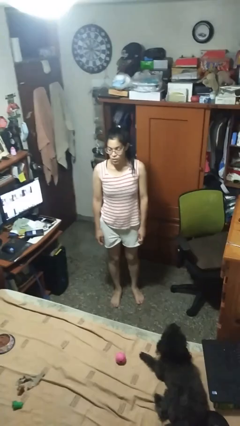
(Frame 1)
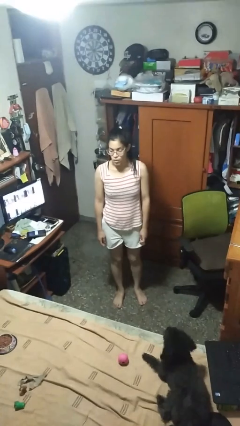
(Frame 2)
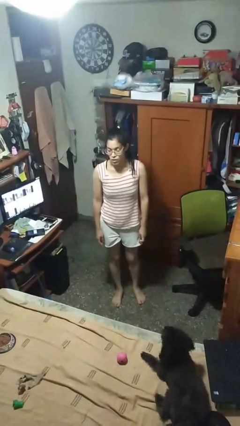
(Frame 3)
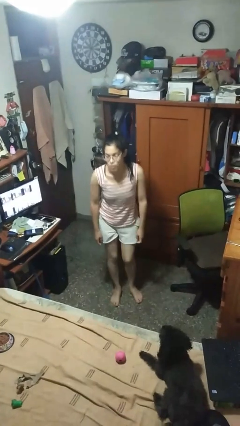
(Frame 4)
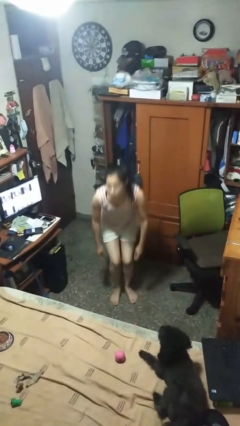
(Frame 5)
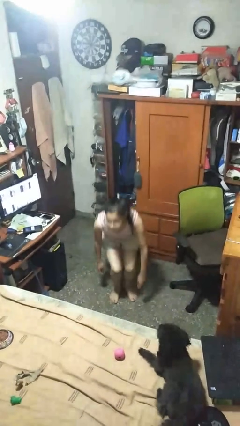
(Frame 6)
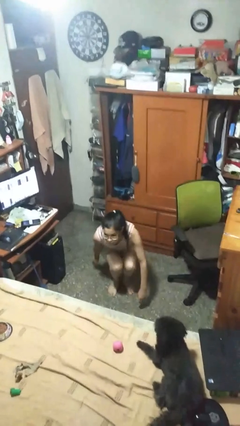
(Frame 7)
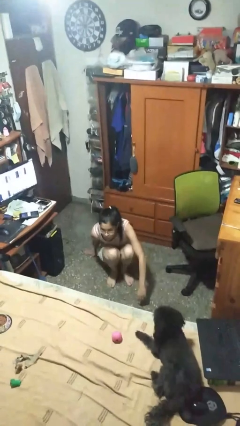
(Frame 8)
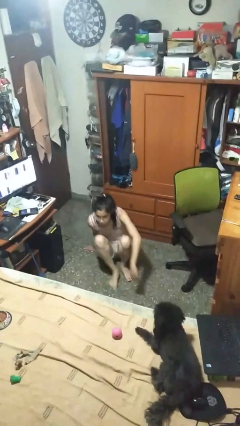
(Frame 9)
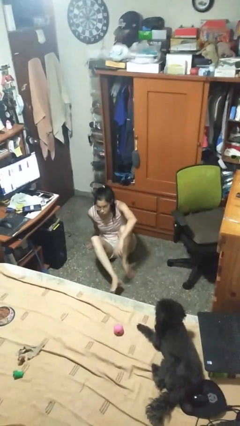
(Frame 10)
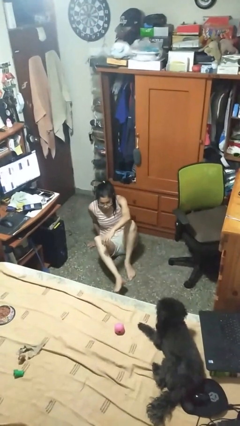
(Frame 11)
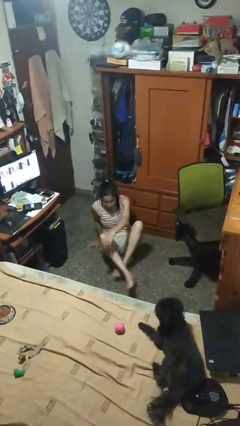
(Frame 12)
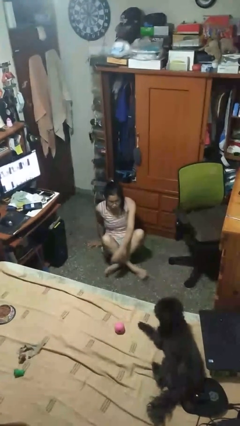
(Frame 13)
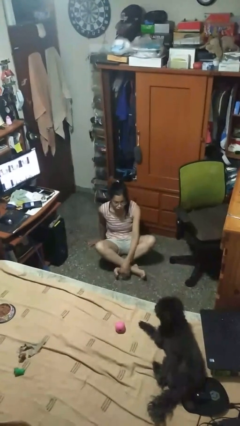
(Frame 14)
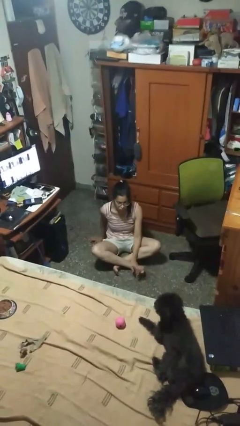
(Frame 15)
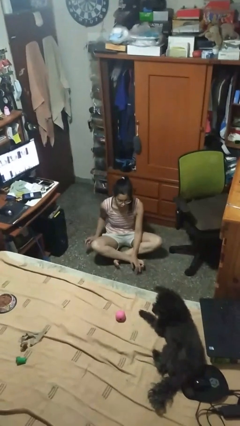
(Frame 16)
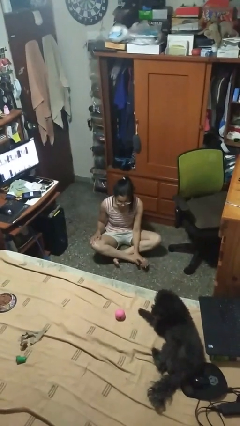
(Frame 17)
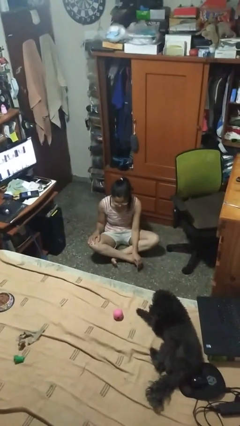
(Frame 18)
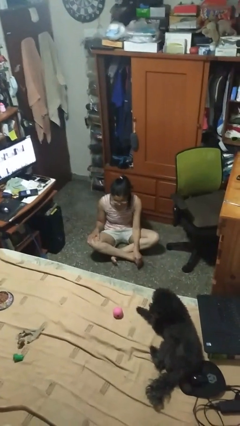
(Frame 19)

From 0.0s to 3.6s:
person sits crisscross

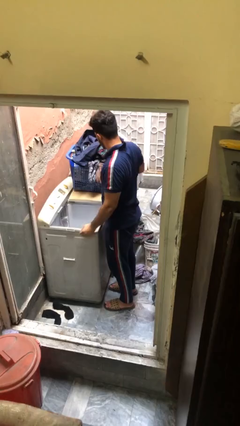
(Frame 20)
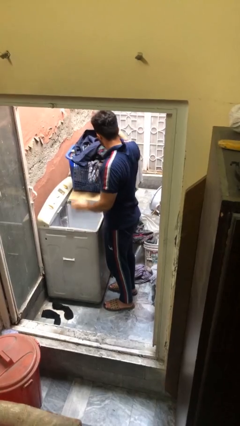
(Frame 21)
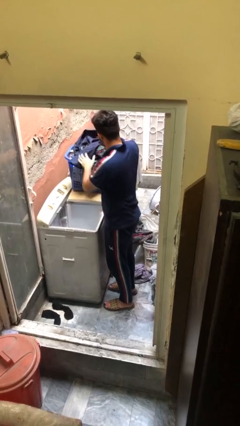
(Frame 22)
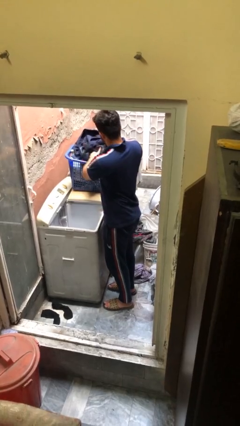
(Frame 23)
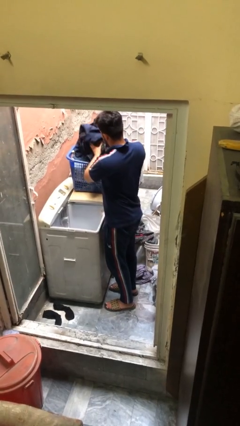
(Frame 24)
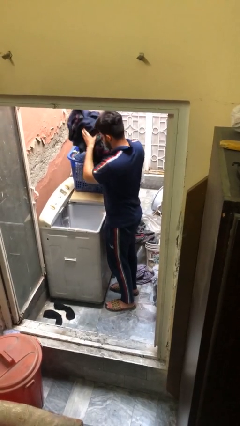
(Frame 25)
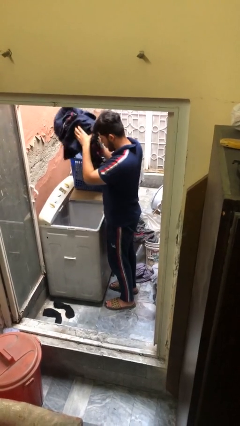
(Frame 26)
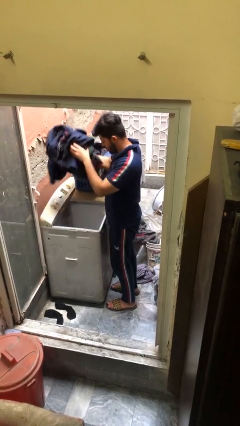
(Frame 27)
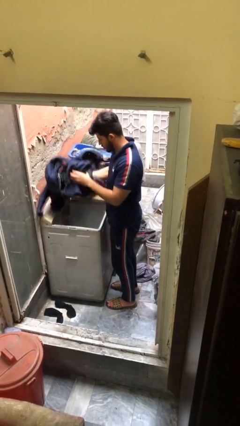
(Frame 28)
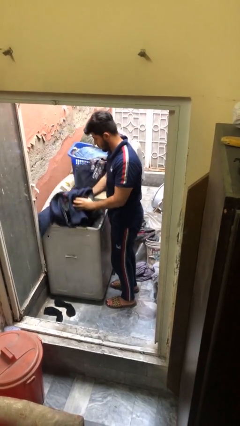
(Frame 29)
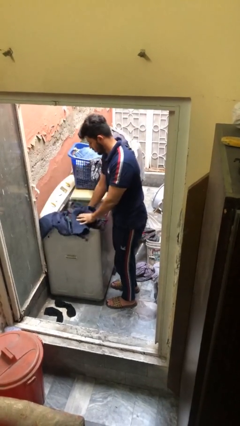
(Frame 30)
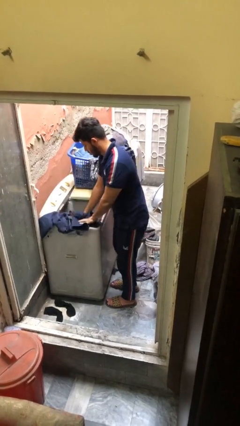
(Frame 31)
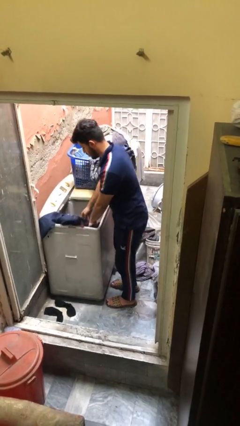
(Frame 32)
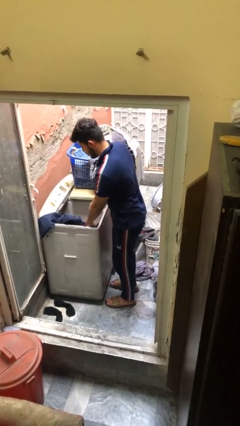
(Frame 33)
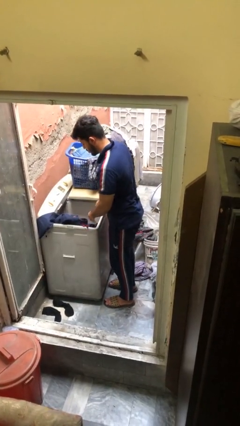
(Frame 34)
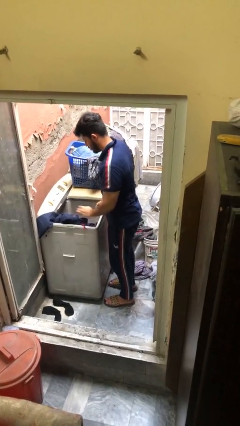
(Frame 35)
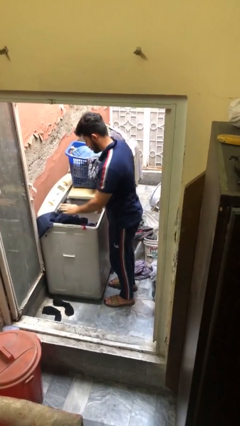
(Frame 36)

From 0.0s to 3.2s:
person loads clotheswasher

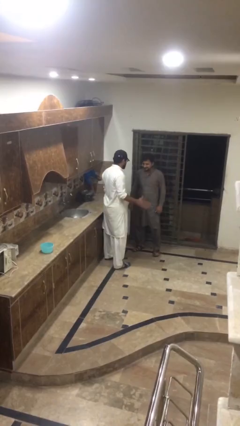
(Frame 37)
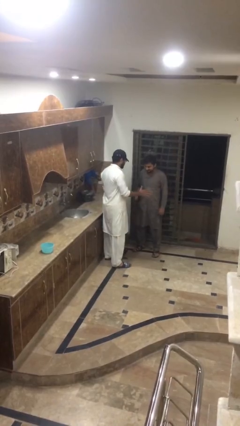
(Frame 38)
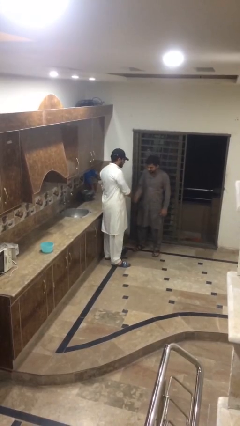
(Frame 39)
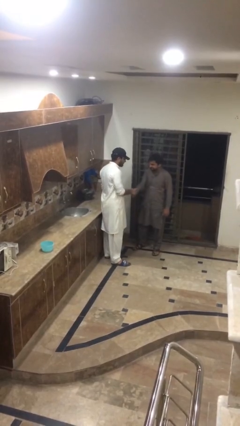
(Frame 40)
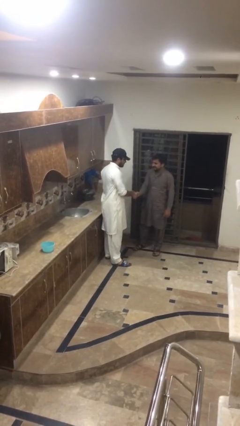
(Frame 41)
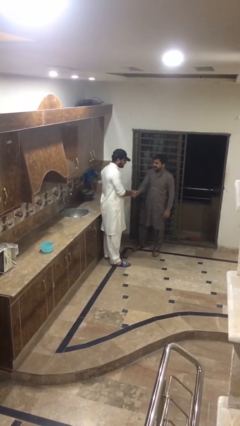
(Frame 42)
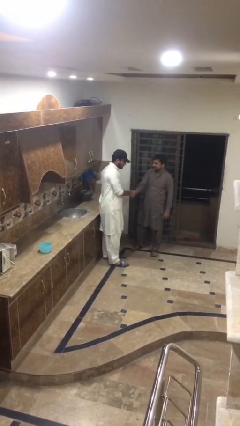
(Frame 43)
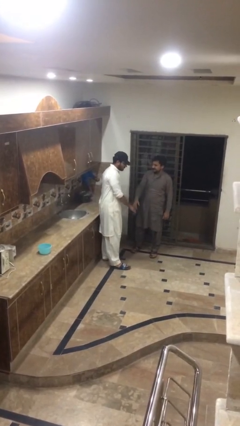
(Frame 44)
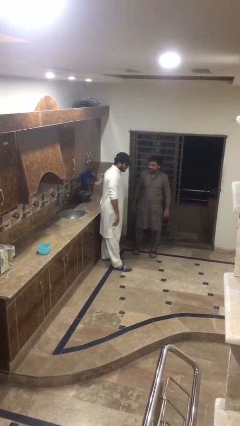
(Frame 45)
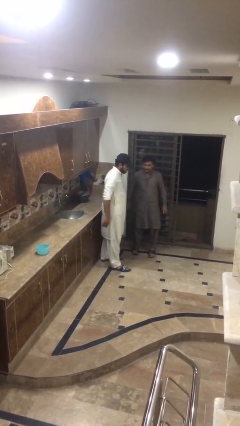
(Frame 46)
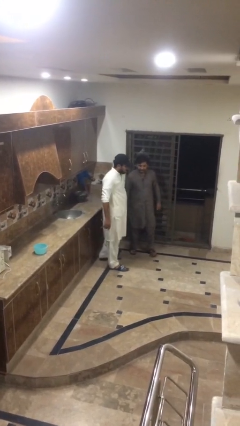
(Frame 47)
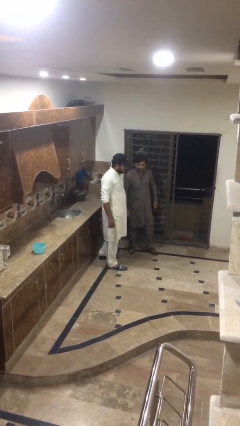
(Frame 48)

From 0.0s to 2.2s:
person shakes hand

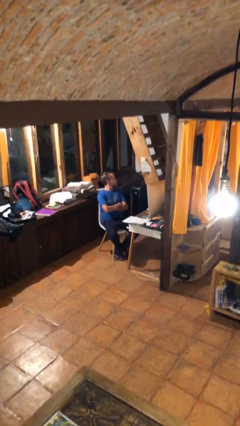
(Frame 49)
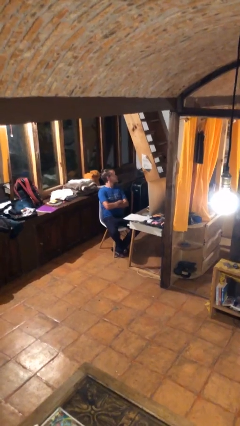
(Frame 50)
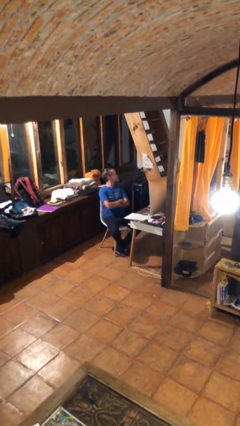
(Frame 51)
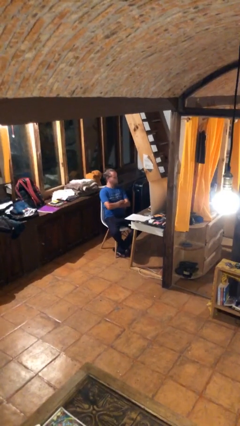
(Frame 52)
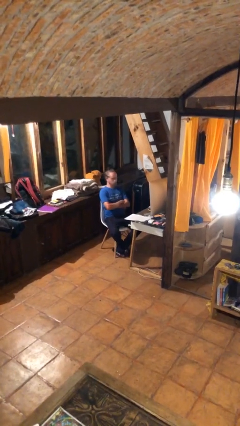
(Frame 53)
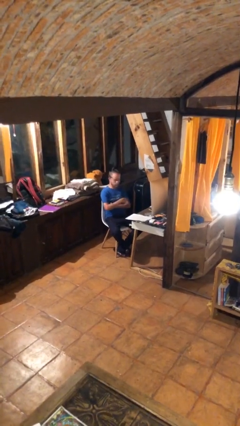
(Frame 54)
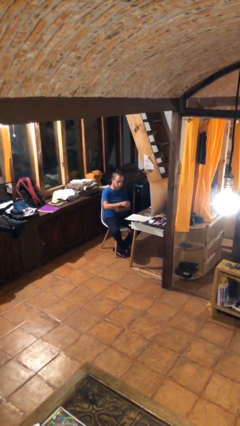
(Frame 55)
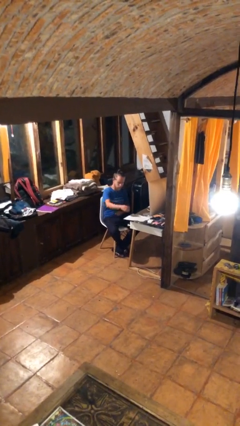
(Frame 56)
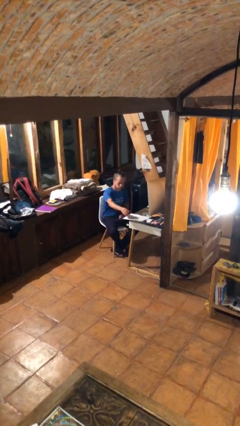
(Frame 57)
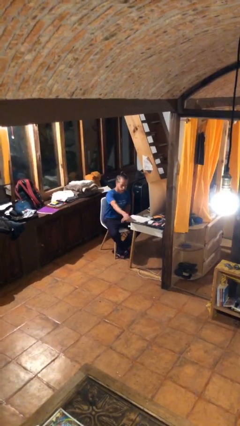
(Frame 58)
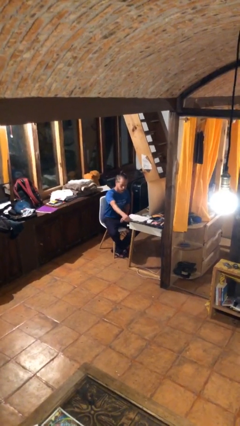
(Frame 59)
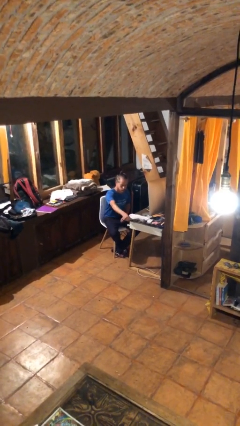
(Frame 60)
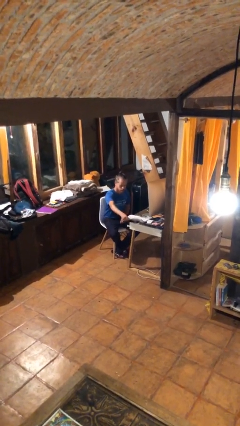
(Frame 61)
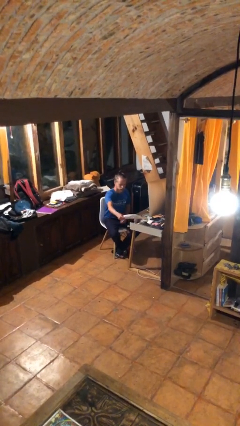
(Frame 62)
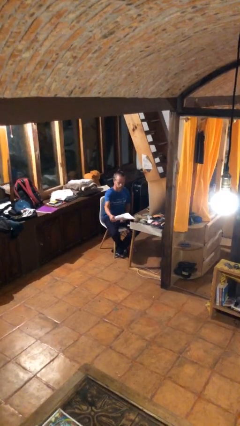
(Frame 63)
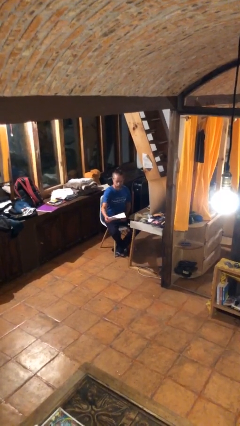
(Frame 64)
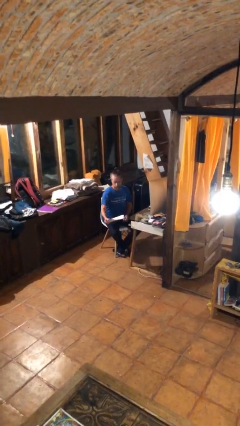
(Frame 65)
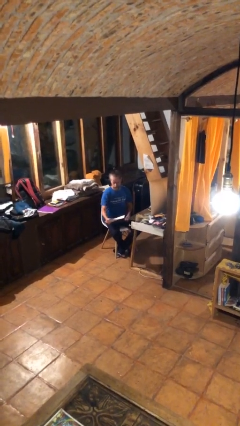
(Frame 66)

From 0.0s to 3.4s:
person picks up object from table

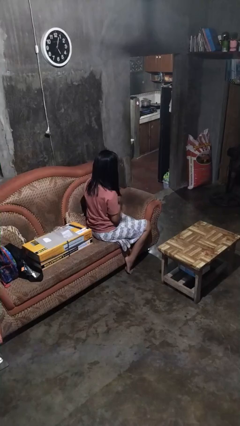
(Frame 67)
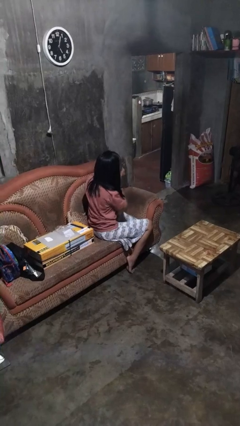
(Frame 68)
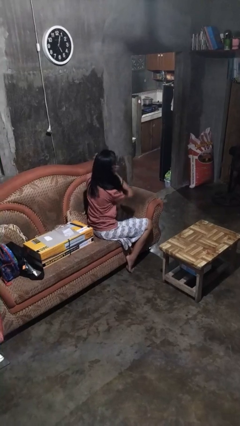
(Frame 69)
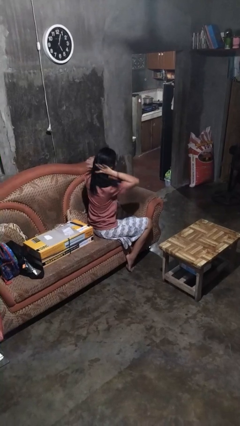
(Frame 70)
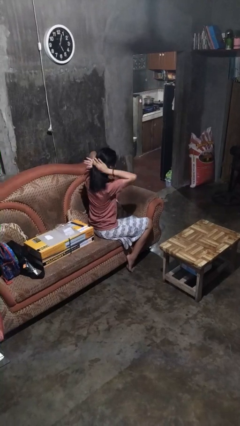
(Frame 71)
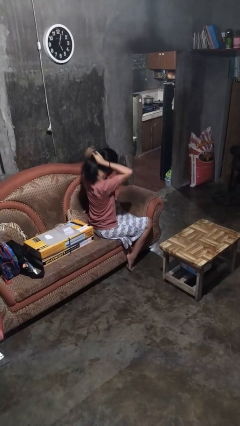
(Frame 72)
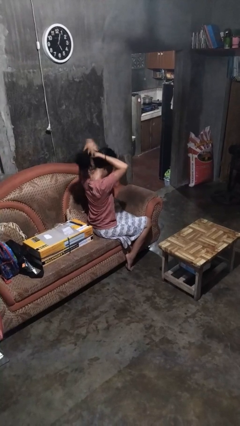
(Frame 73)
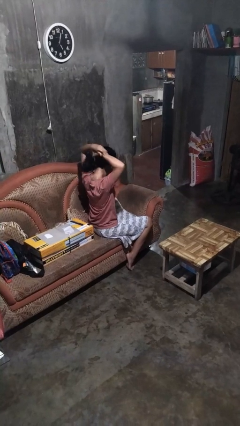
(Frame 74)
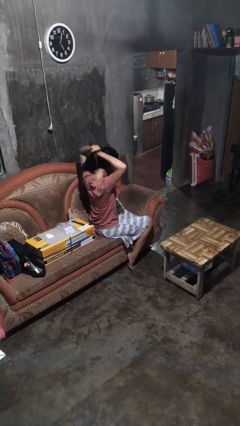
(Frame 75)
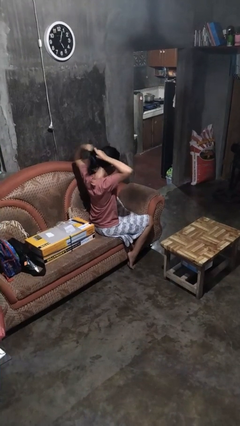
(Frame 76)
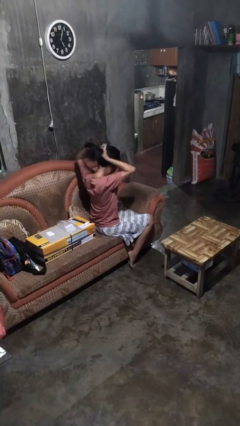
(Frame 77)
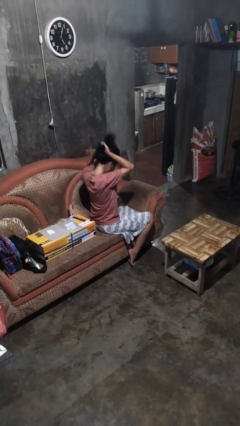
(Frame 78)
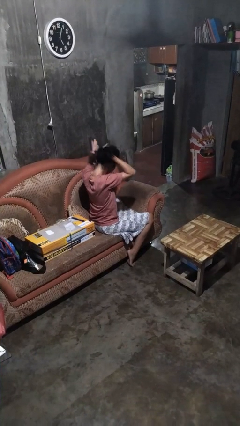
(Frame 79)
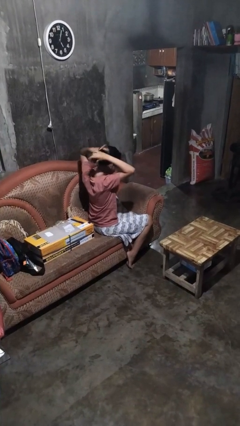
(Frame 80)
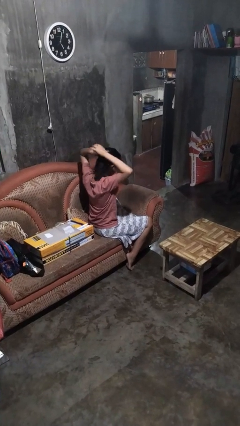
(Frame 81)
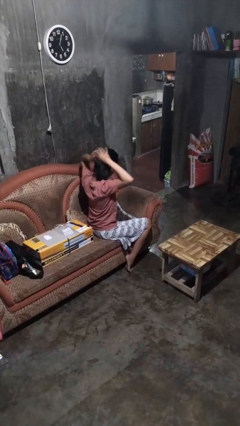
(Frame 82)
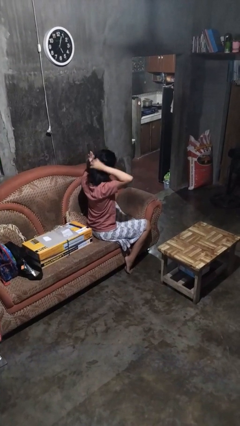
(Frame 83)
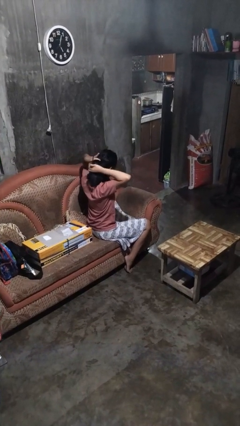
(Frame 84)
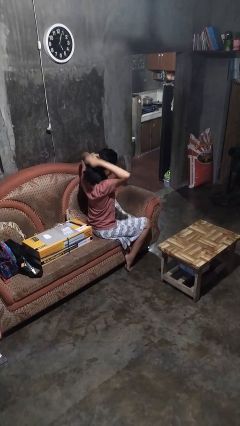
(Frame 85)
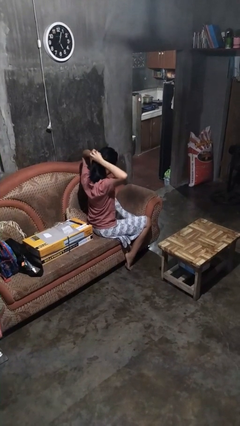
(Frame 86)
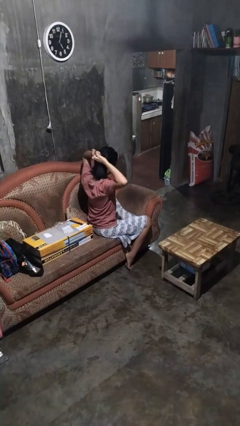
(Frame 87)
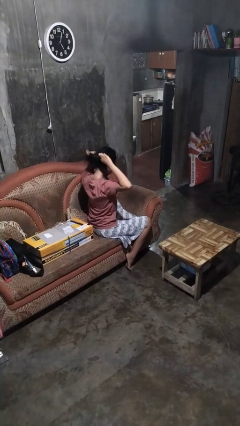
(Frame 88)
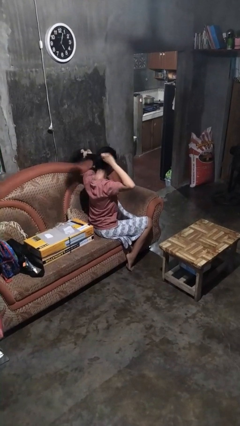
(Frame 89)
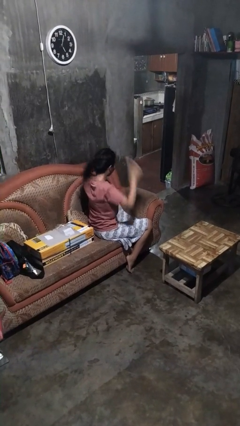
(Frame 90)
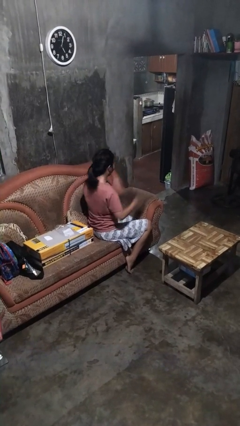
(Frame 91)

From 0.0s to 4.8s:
person puts hair in ponytail

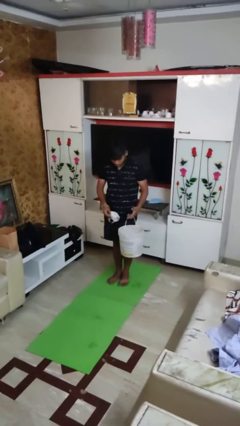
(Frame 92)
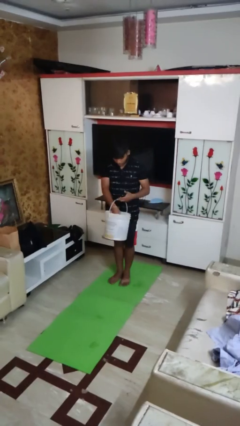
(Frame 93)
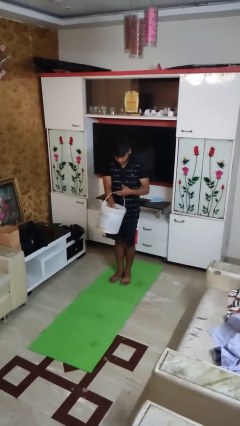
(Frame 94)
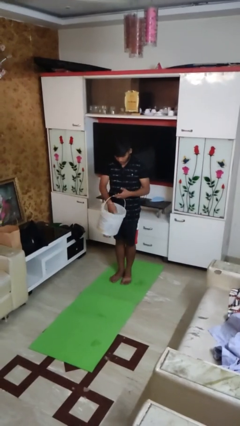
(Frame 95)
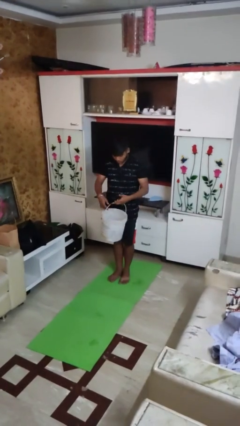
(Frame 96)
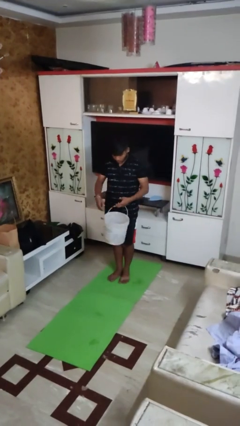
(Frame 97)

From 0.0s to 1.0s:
person puts object into basket
